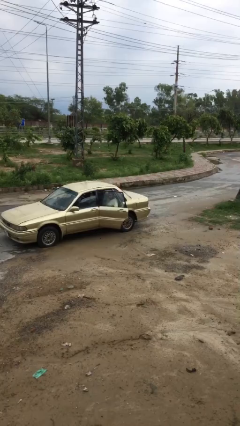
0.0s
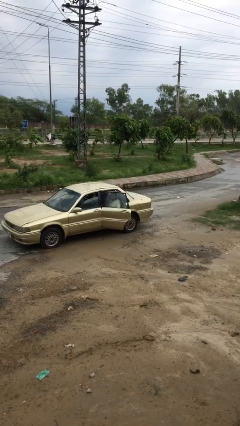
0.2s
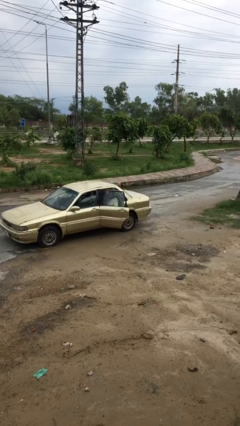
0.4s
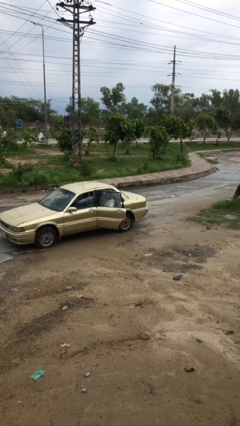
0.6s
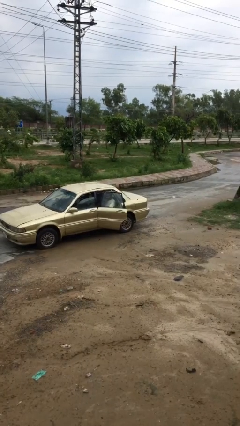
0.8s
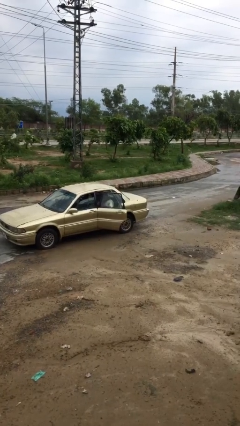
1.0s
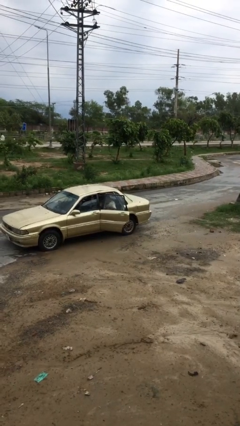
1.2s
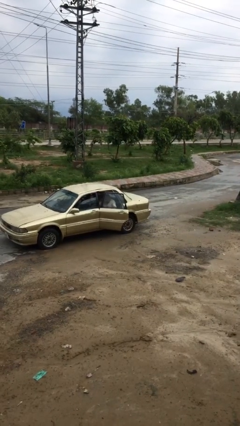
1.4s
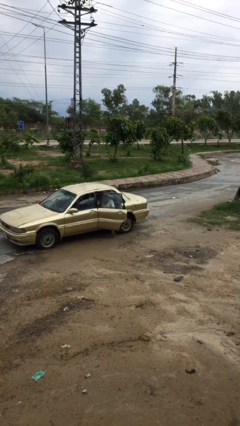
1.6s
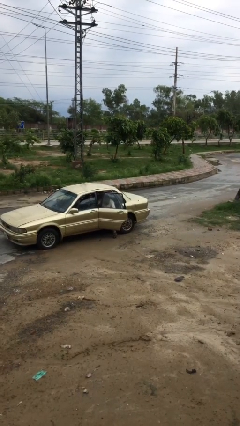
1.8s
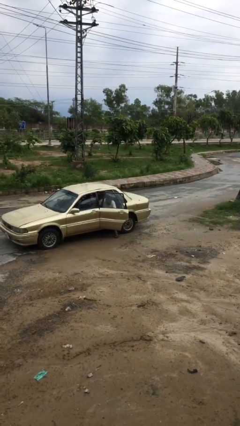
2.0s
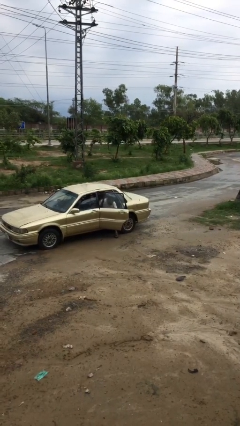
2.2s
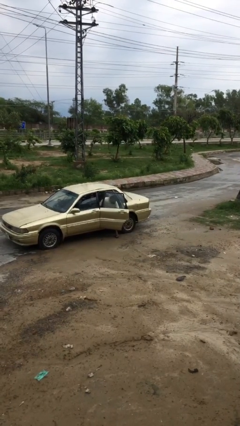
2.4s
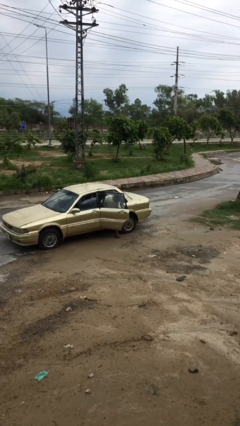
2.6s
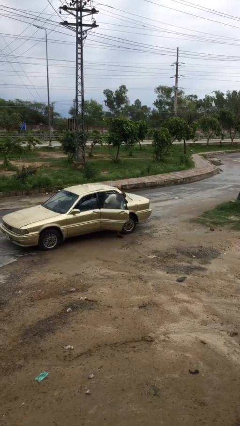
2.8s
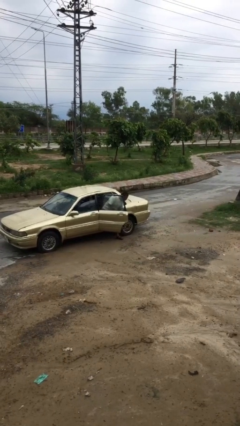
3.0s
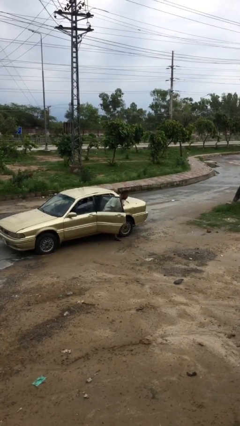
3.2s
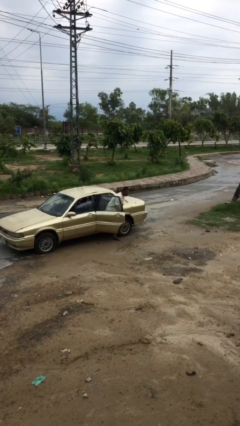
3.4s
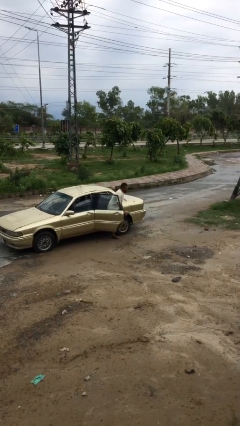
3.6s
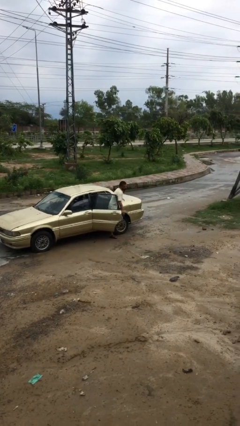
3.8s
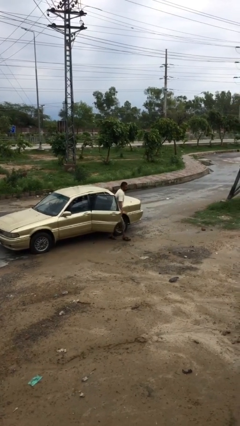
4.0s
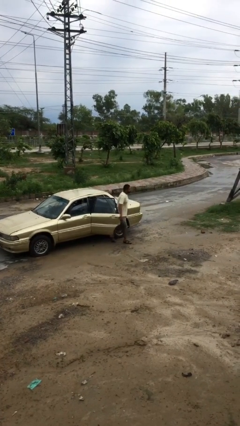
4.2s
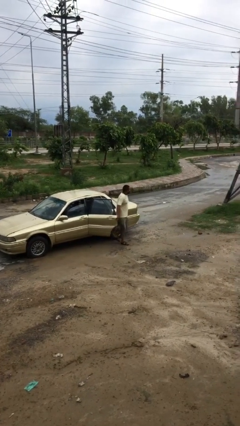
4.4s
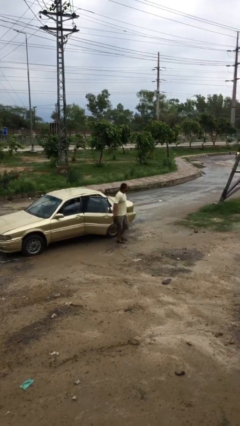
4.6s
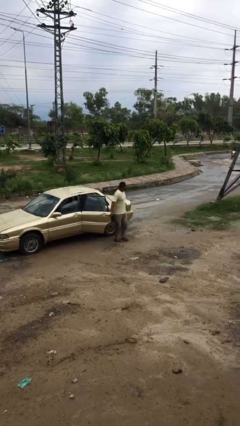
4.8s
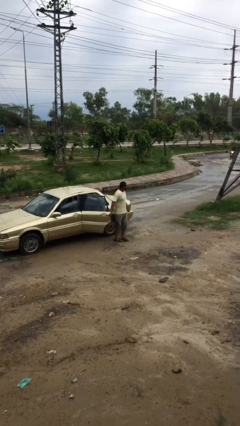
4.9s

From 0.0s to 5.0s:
person exits car

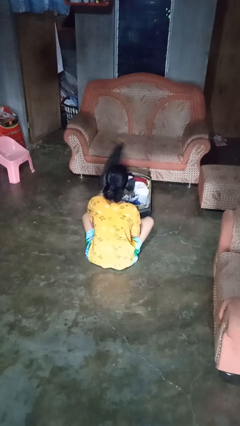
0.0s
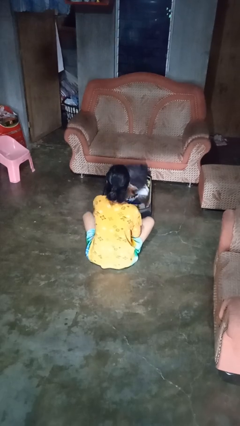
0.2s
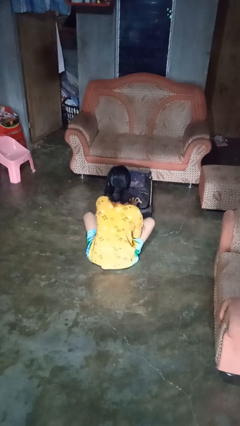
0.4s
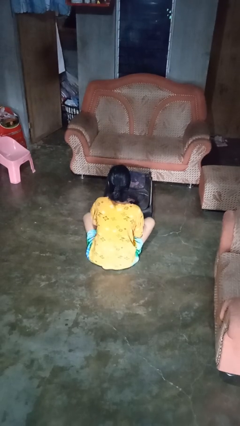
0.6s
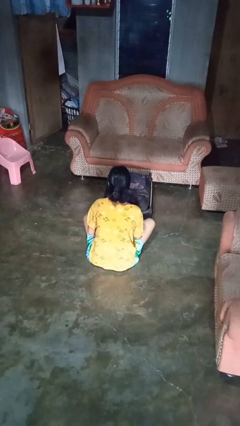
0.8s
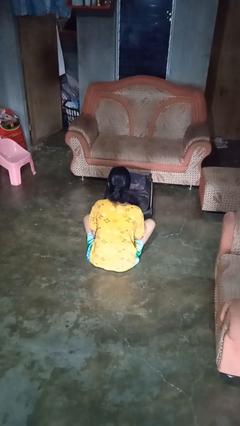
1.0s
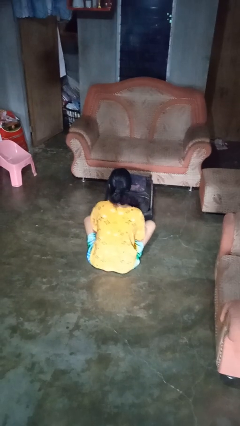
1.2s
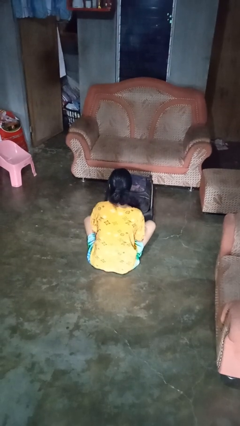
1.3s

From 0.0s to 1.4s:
person closes suitcase

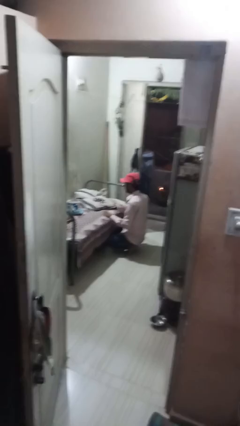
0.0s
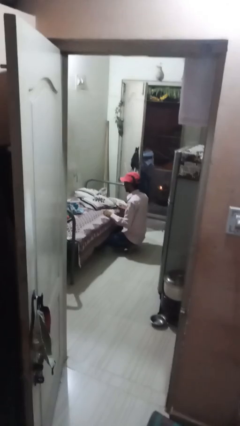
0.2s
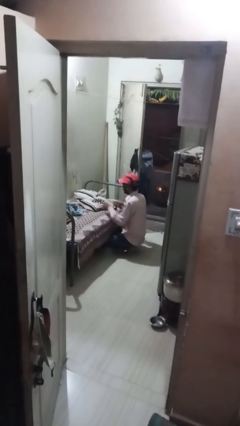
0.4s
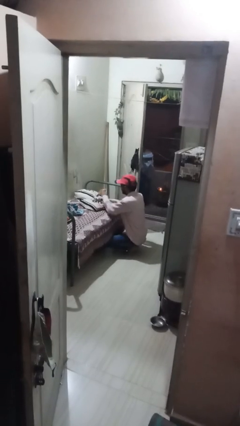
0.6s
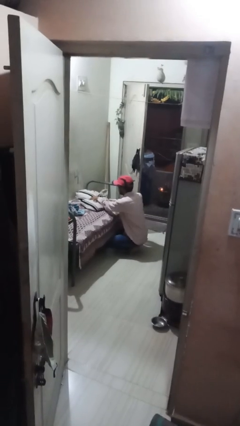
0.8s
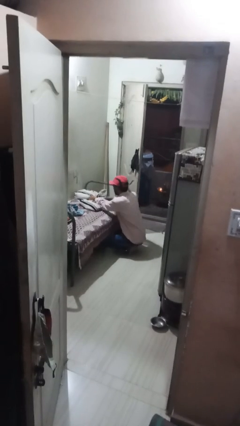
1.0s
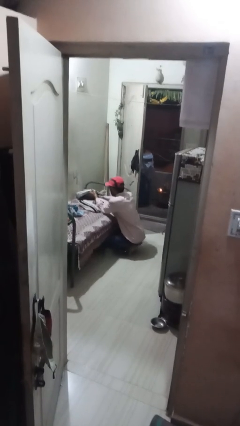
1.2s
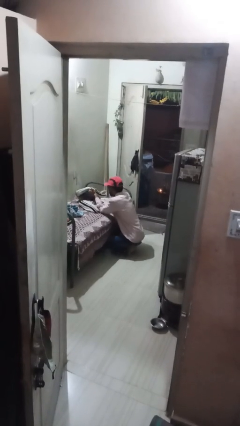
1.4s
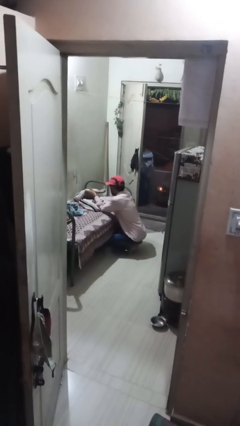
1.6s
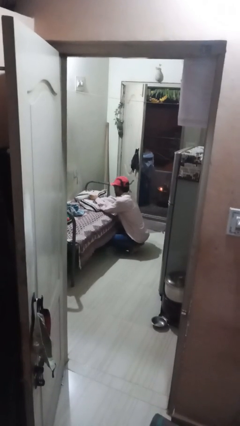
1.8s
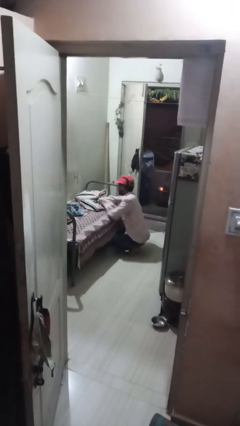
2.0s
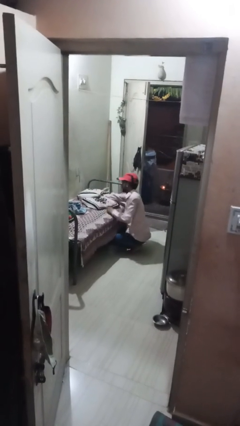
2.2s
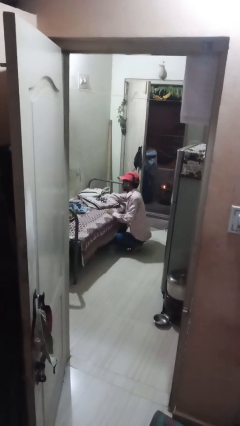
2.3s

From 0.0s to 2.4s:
person searches in couch

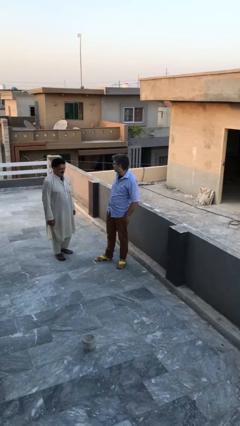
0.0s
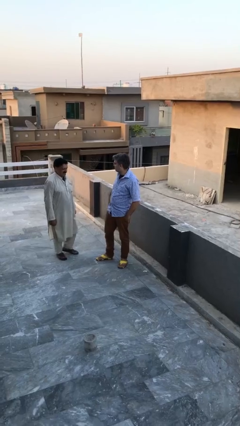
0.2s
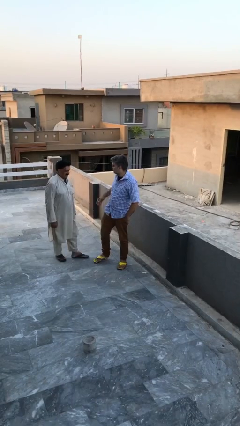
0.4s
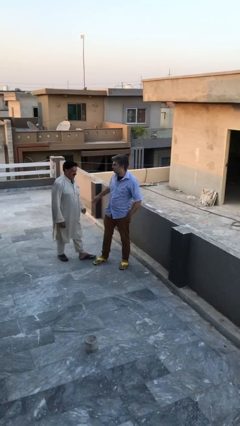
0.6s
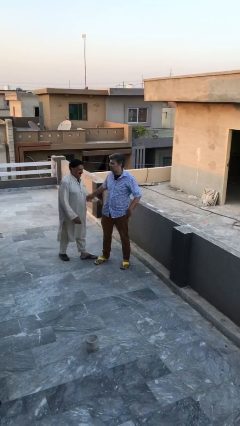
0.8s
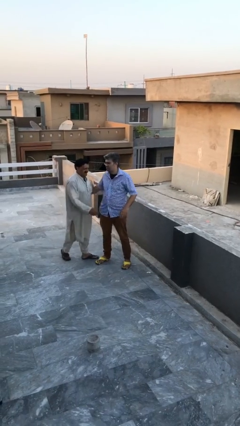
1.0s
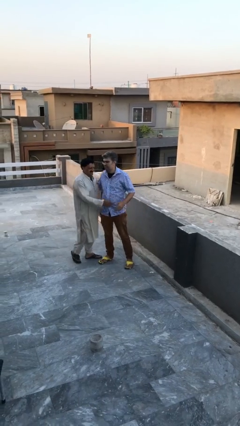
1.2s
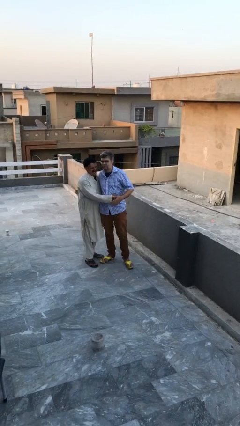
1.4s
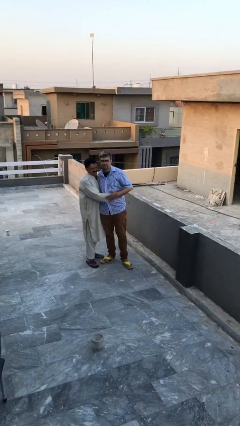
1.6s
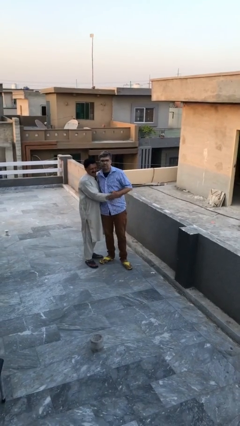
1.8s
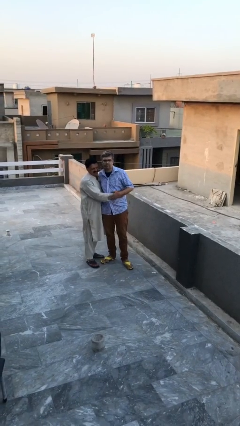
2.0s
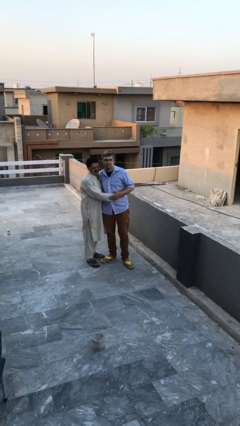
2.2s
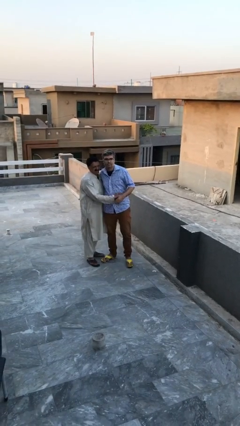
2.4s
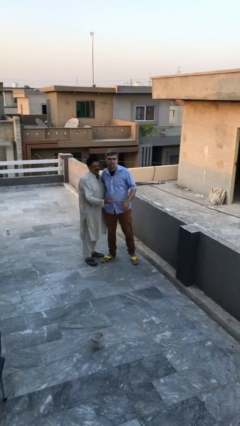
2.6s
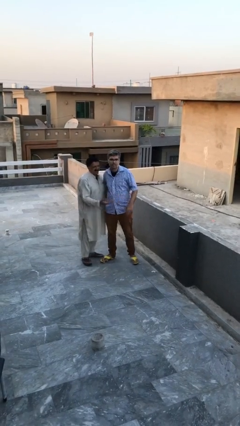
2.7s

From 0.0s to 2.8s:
person embraces person

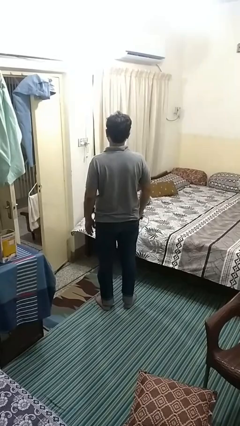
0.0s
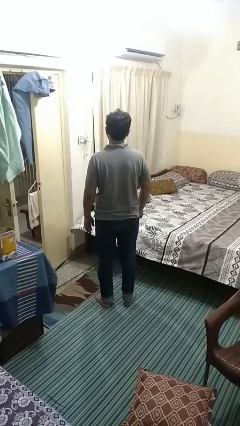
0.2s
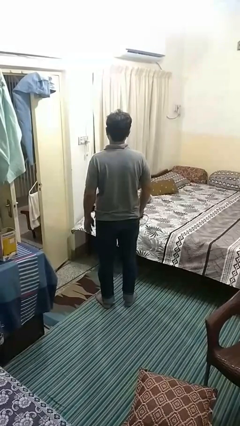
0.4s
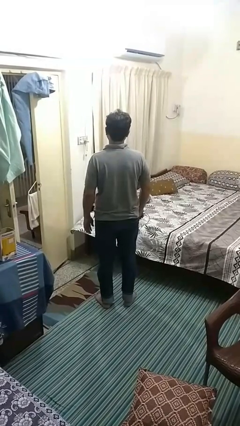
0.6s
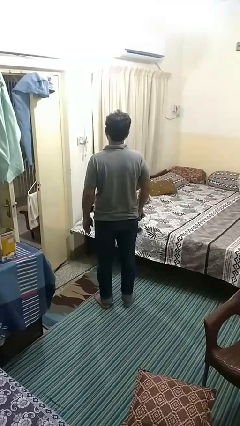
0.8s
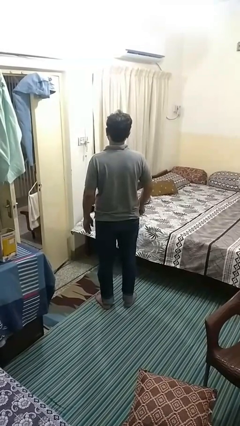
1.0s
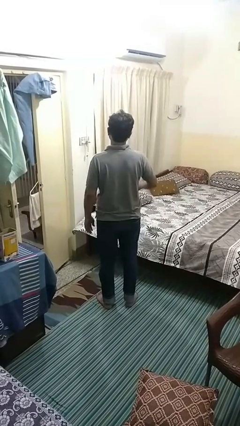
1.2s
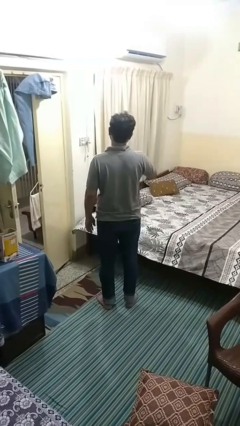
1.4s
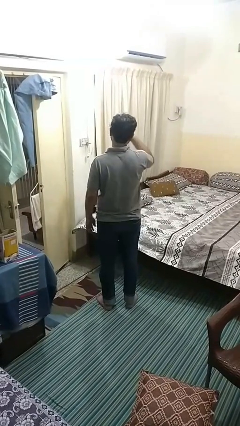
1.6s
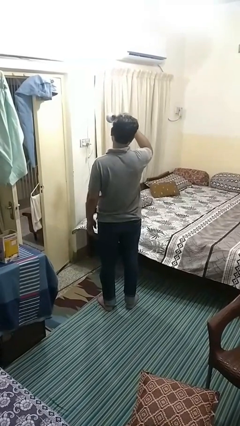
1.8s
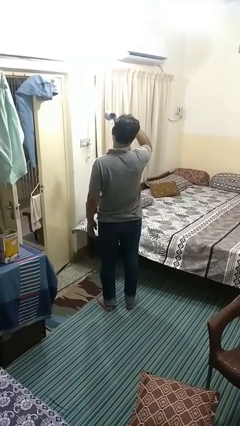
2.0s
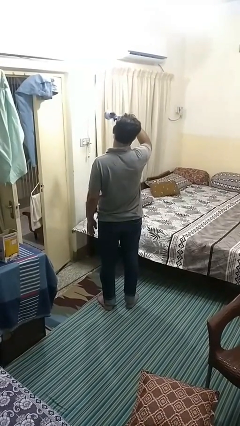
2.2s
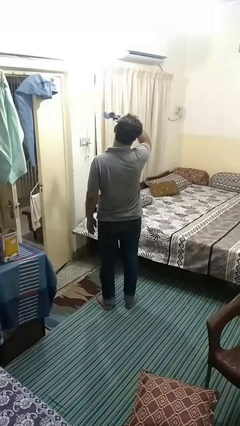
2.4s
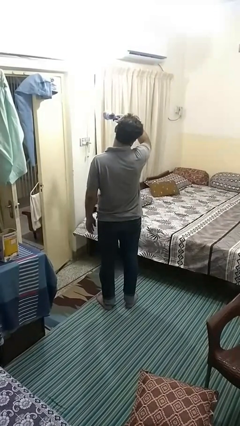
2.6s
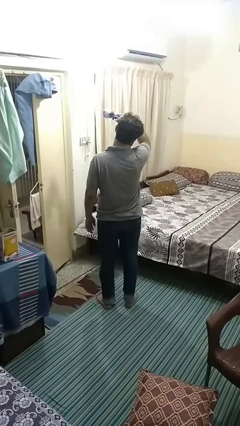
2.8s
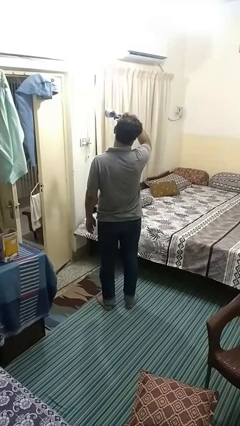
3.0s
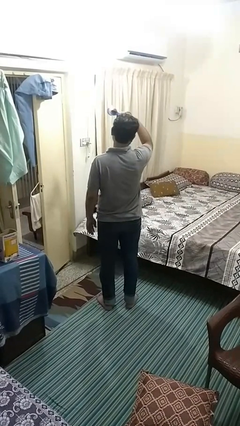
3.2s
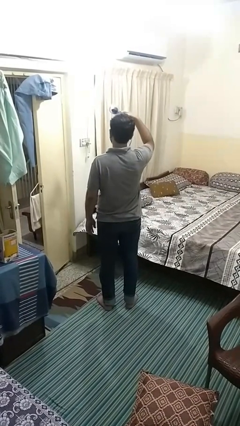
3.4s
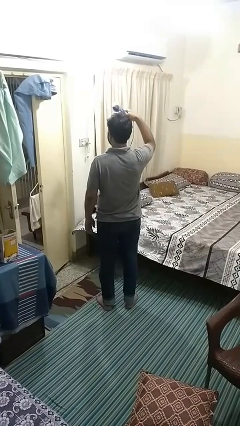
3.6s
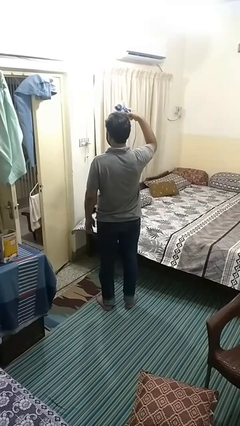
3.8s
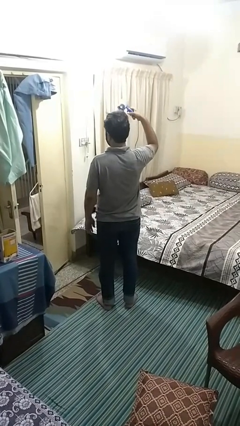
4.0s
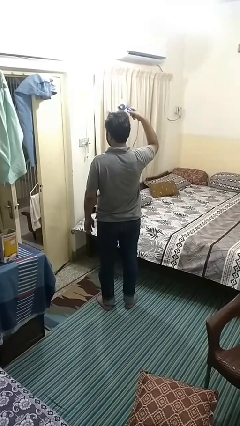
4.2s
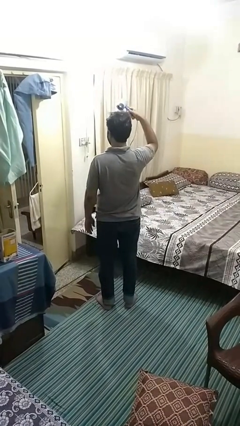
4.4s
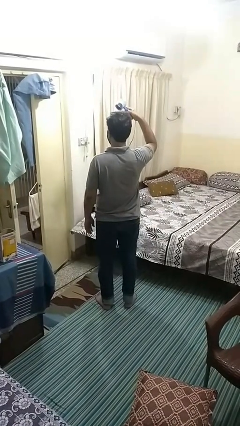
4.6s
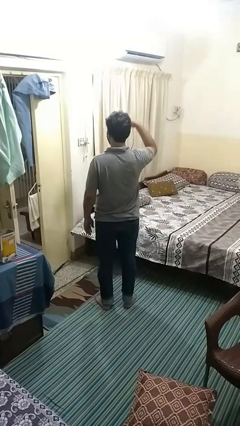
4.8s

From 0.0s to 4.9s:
person dries hair with hairdryer

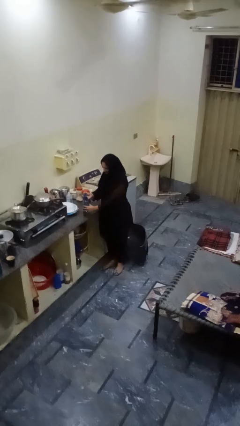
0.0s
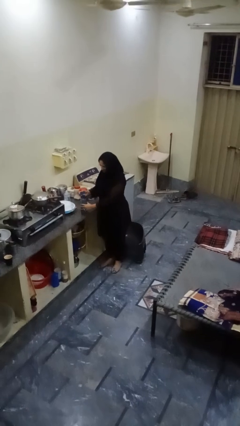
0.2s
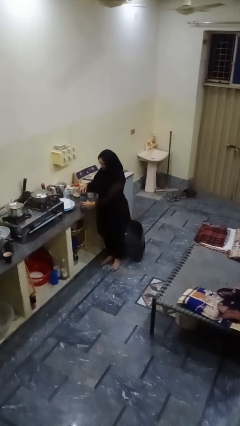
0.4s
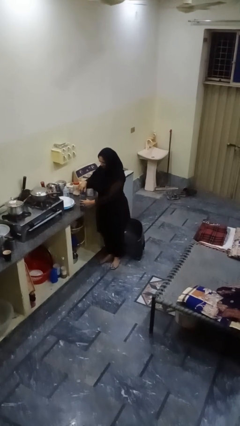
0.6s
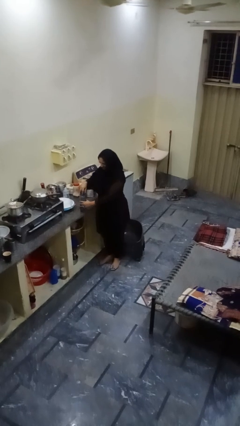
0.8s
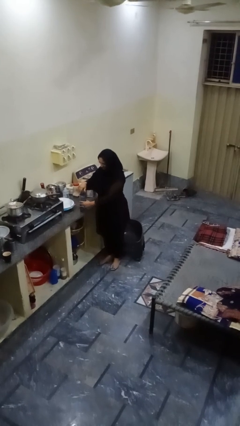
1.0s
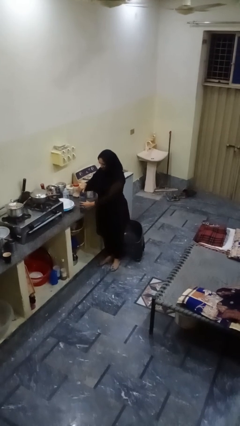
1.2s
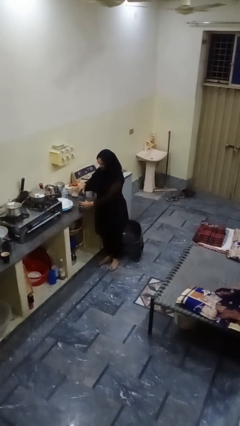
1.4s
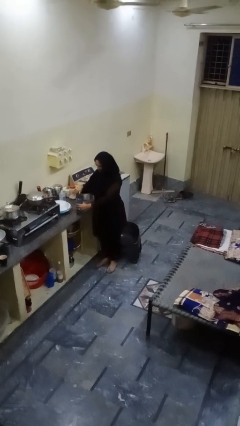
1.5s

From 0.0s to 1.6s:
person screws lid to bottle
